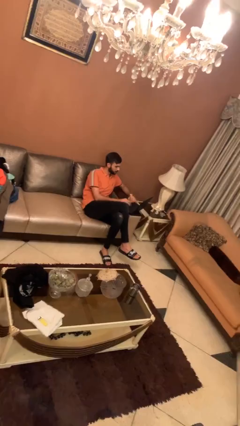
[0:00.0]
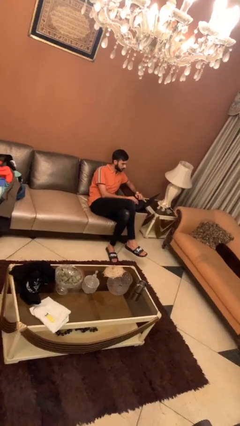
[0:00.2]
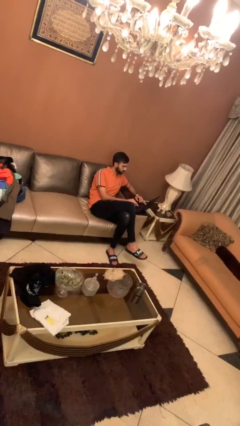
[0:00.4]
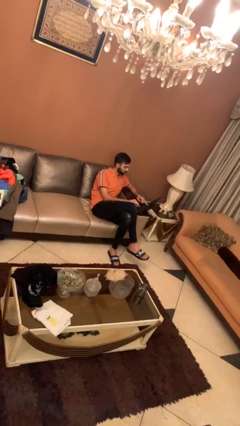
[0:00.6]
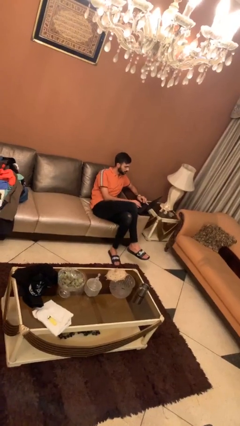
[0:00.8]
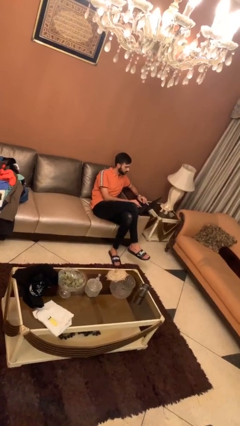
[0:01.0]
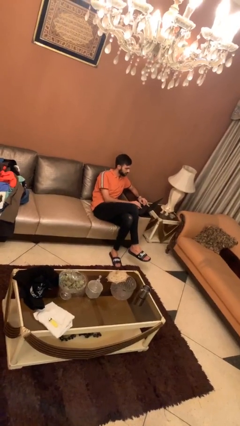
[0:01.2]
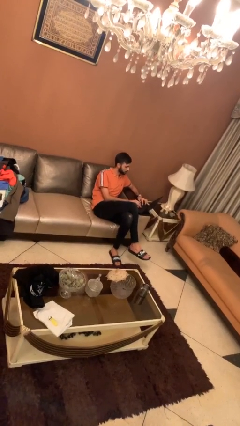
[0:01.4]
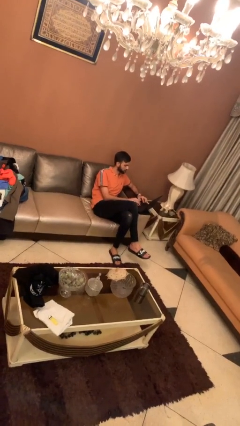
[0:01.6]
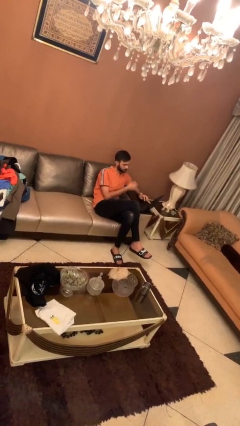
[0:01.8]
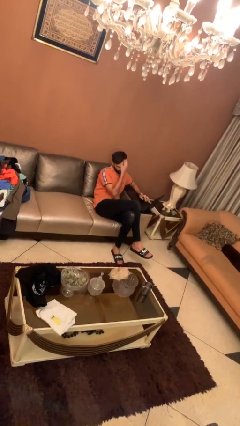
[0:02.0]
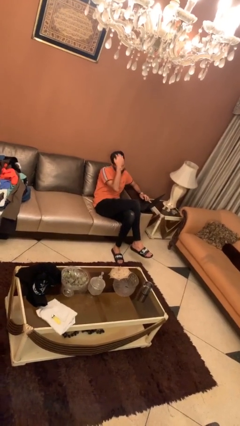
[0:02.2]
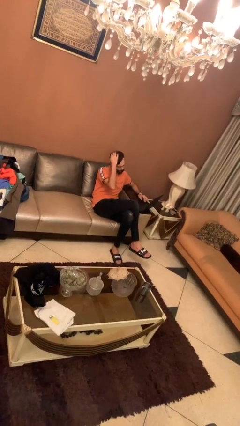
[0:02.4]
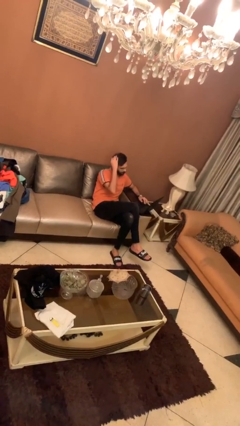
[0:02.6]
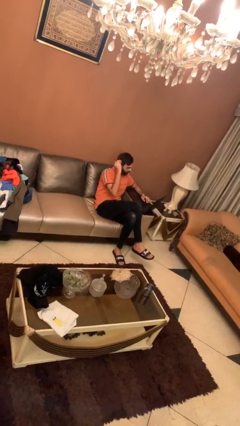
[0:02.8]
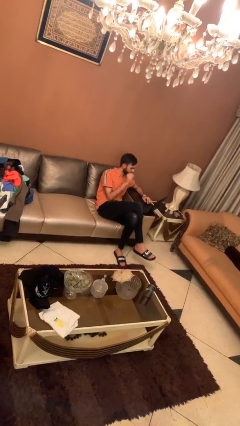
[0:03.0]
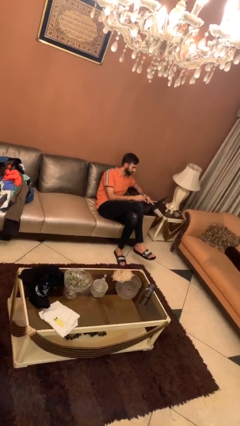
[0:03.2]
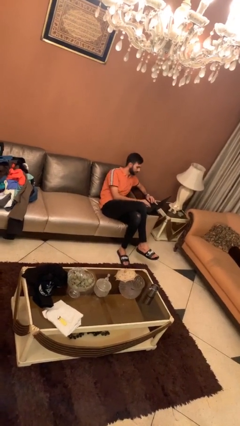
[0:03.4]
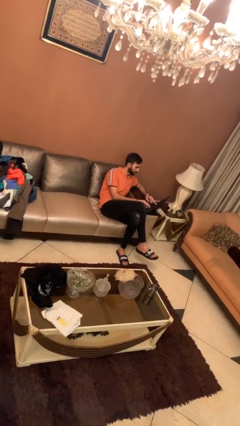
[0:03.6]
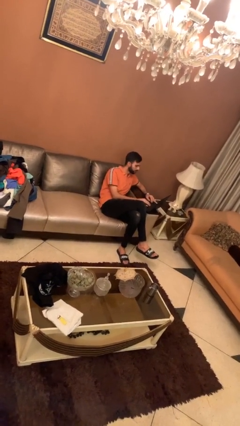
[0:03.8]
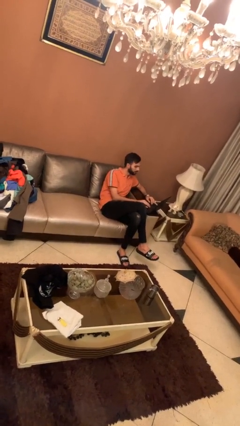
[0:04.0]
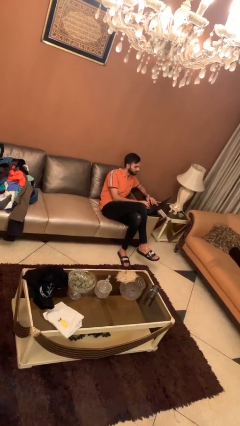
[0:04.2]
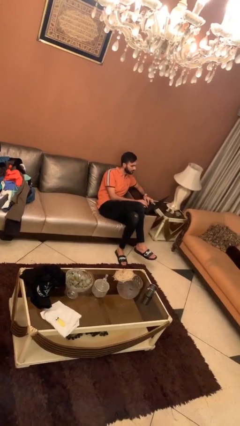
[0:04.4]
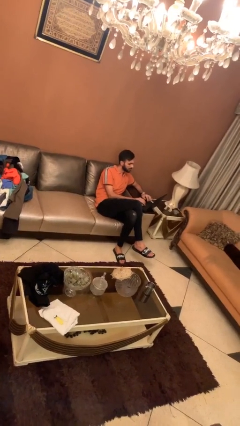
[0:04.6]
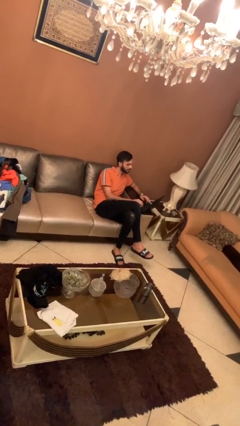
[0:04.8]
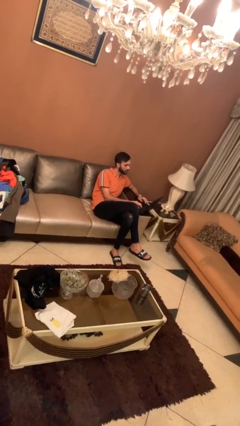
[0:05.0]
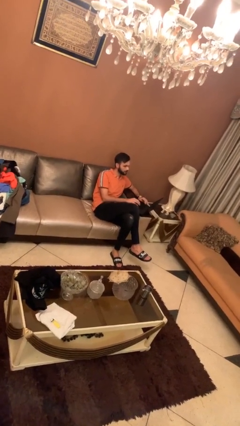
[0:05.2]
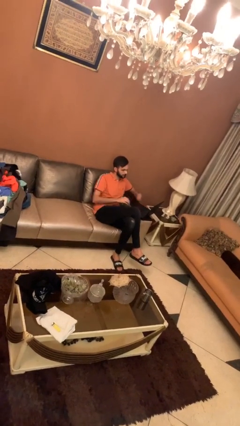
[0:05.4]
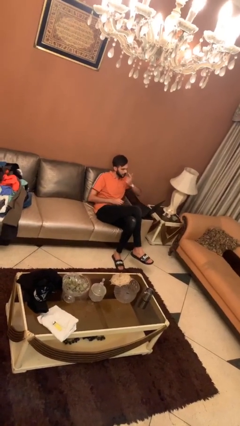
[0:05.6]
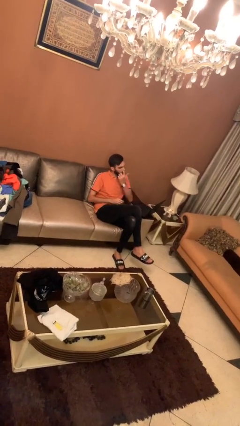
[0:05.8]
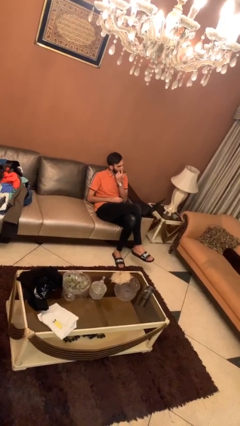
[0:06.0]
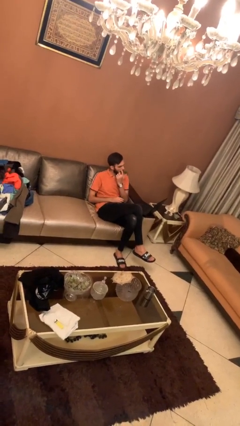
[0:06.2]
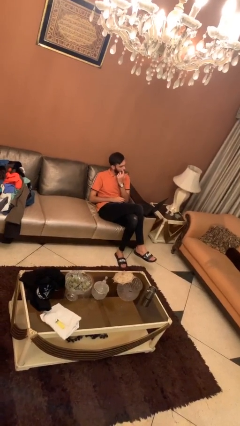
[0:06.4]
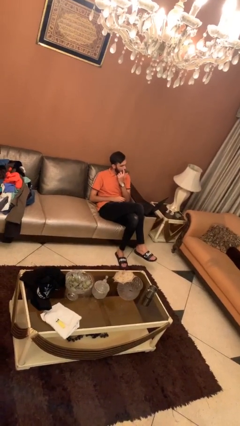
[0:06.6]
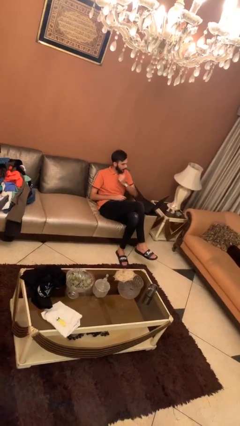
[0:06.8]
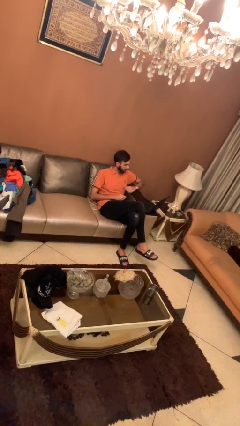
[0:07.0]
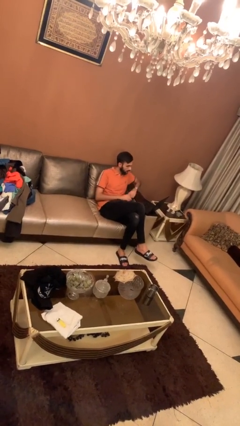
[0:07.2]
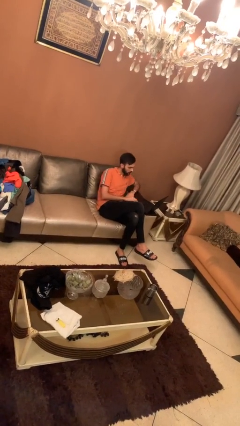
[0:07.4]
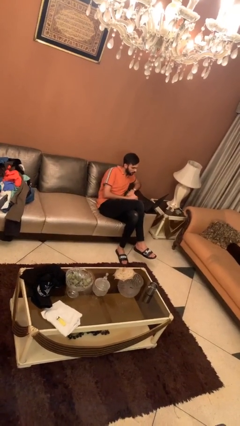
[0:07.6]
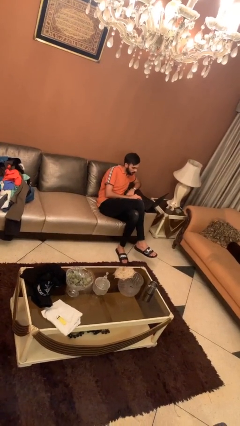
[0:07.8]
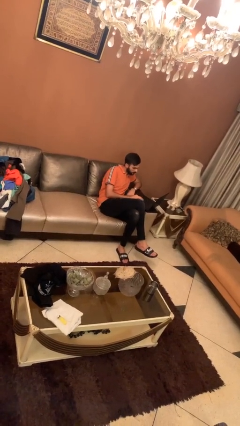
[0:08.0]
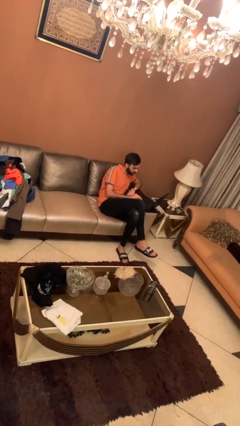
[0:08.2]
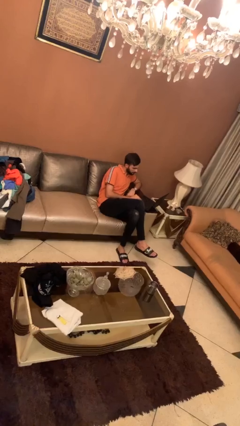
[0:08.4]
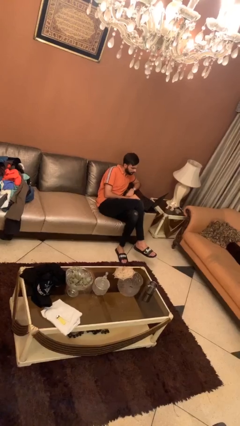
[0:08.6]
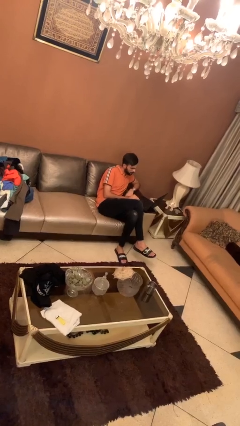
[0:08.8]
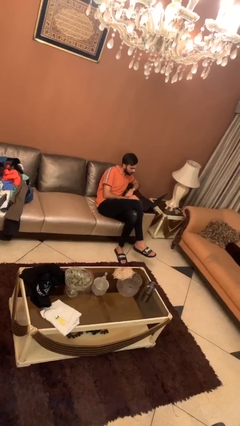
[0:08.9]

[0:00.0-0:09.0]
person interacts with laptop

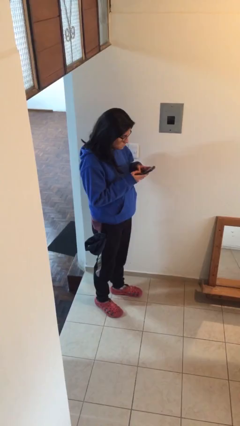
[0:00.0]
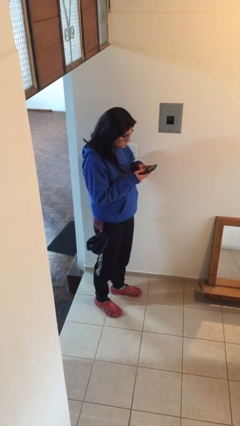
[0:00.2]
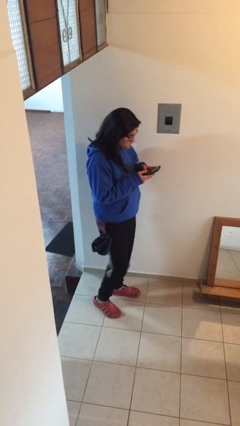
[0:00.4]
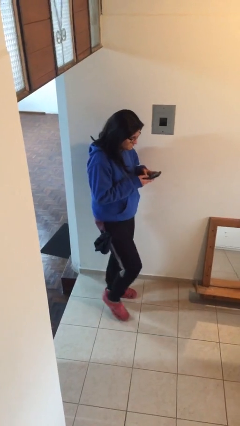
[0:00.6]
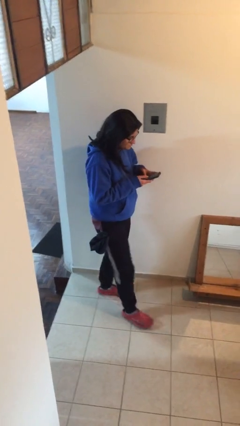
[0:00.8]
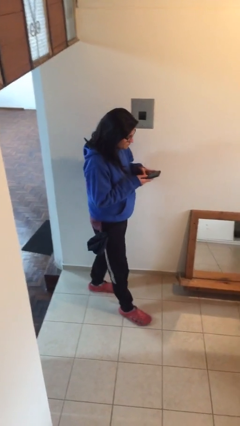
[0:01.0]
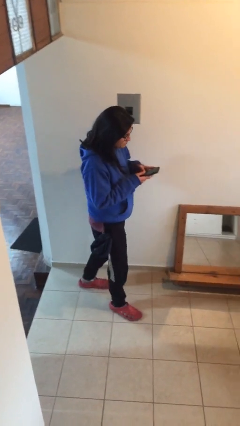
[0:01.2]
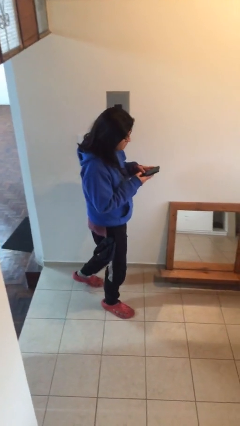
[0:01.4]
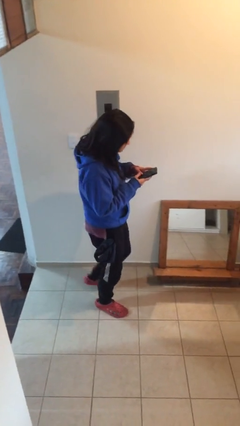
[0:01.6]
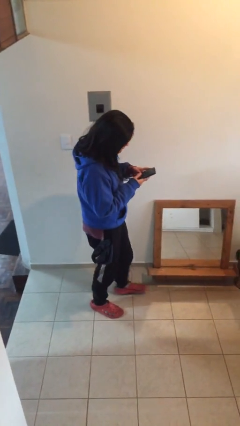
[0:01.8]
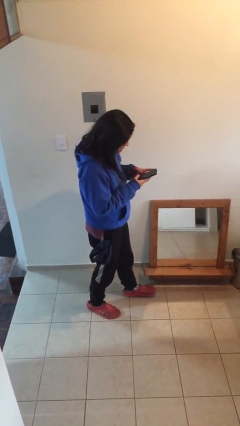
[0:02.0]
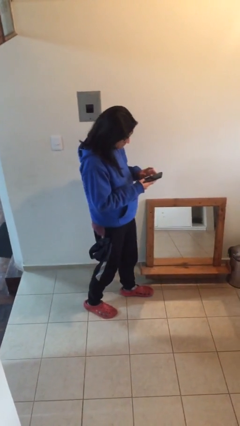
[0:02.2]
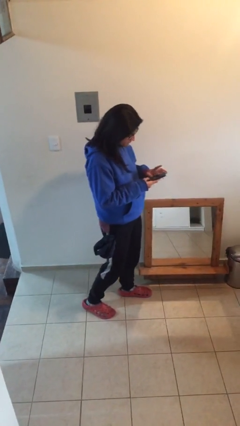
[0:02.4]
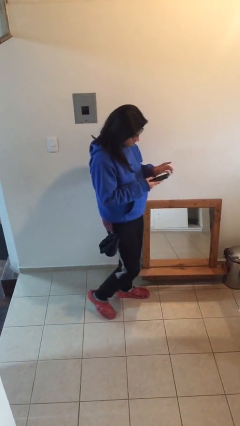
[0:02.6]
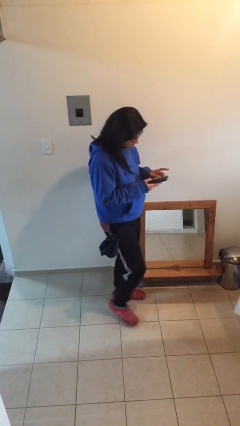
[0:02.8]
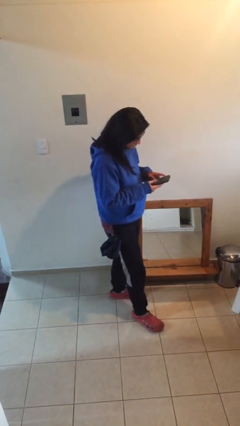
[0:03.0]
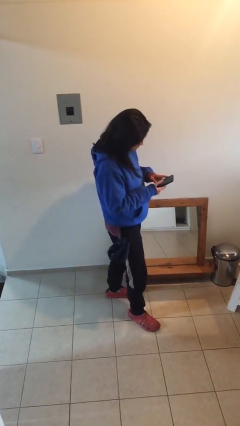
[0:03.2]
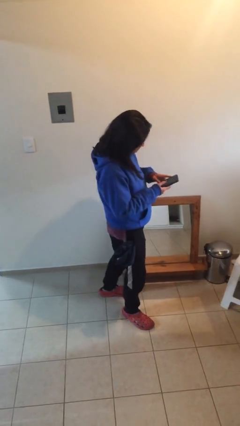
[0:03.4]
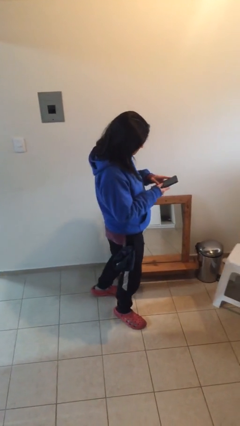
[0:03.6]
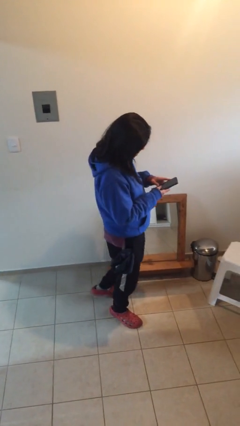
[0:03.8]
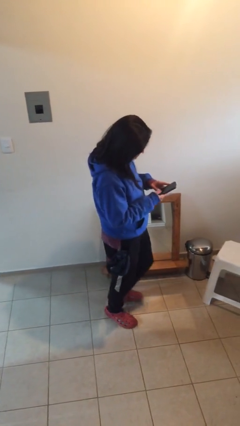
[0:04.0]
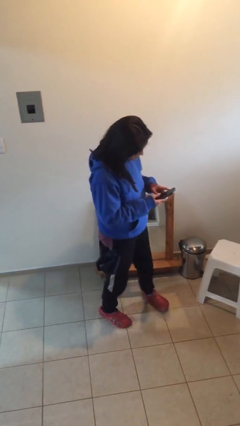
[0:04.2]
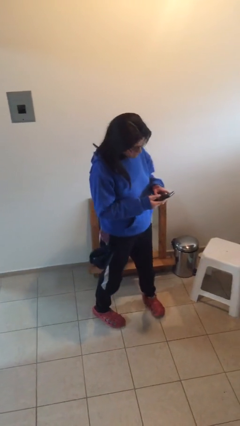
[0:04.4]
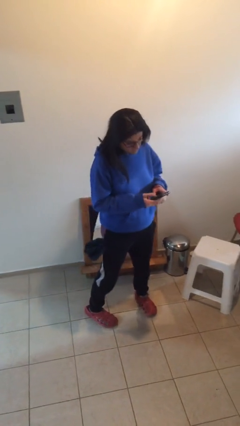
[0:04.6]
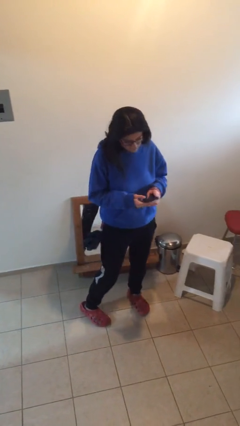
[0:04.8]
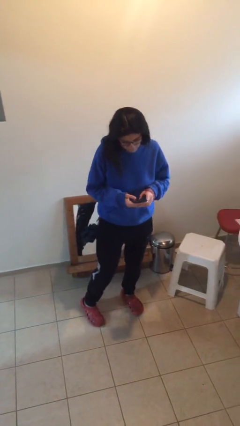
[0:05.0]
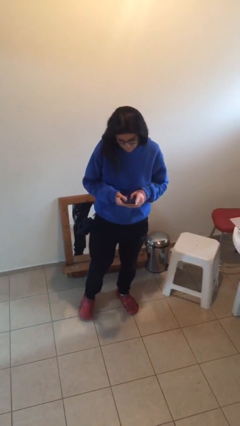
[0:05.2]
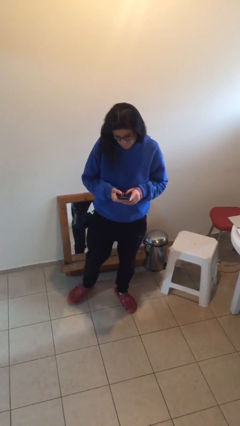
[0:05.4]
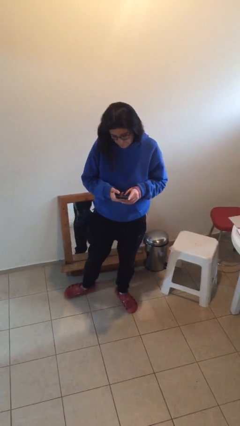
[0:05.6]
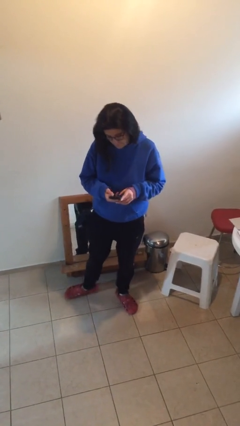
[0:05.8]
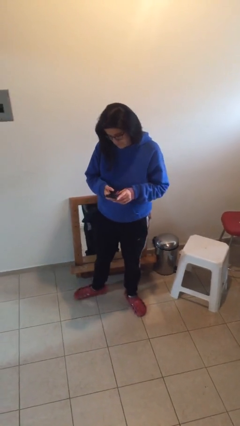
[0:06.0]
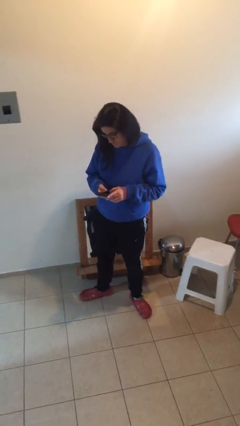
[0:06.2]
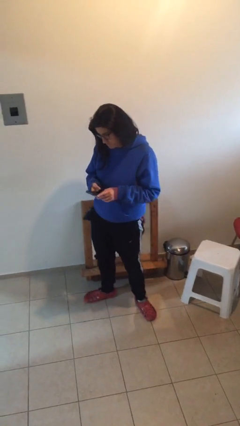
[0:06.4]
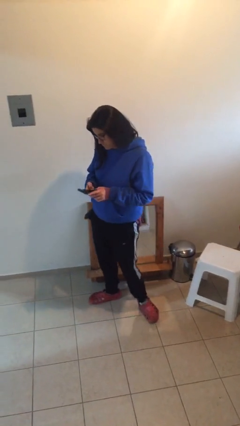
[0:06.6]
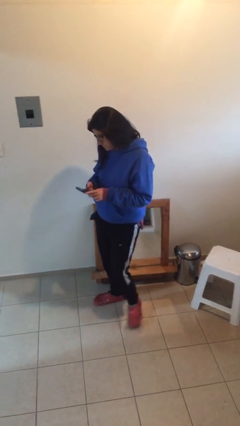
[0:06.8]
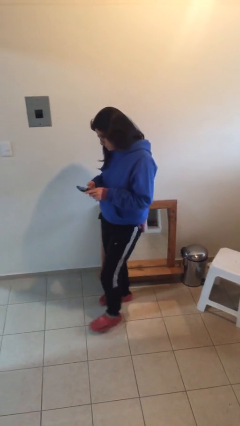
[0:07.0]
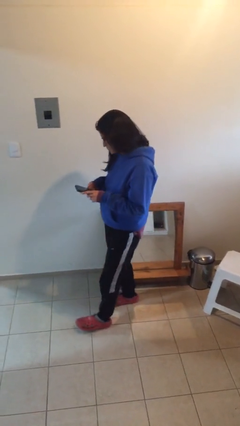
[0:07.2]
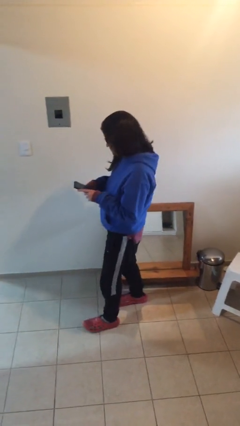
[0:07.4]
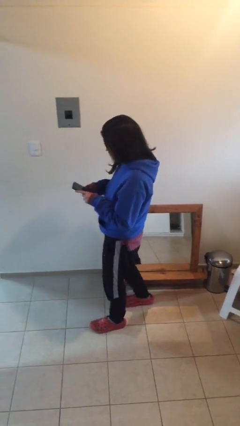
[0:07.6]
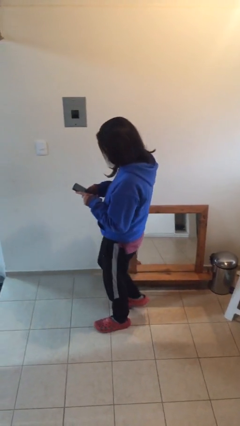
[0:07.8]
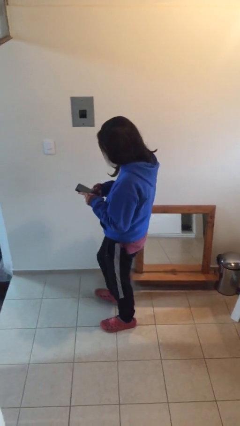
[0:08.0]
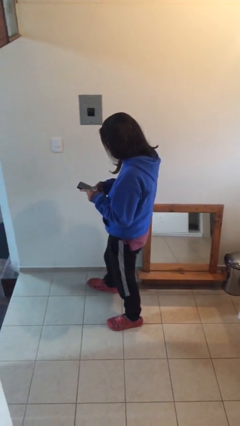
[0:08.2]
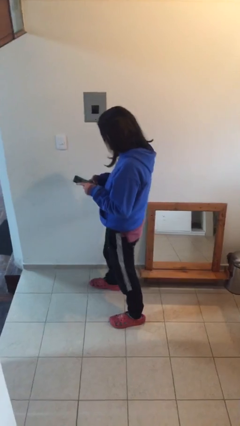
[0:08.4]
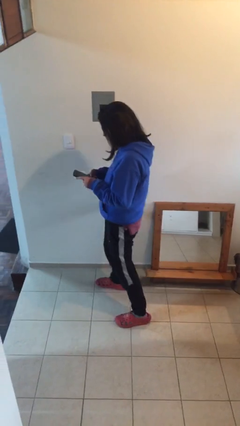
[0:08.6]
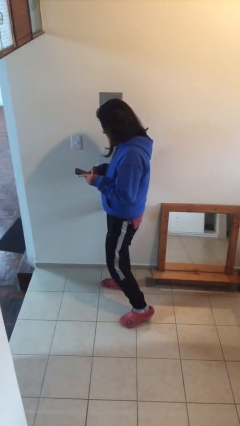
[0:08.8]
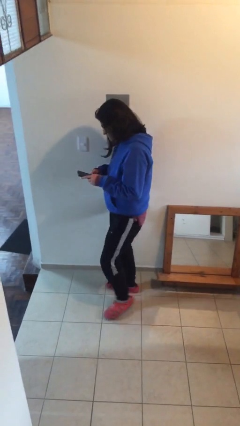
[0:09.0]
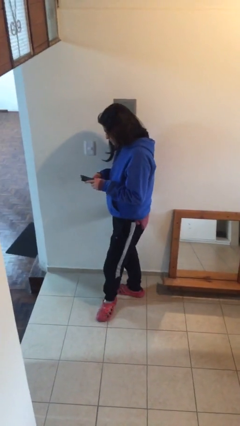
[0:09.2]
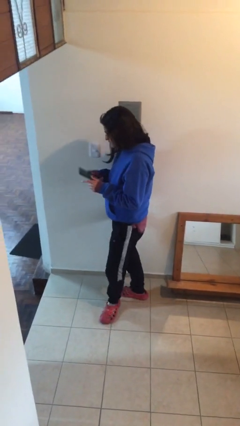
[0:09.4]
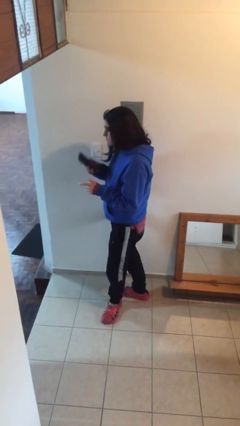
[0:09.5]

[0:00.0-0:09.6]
person texts on phone
